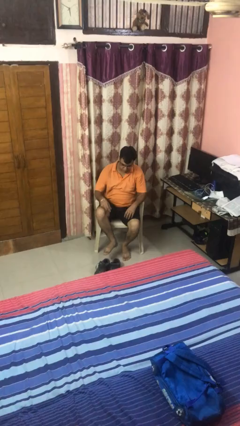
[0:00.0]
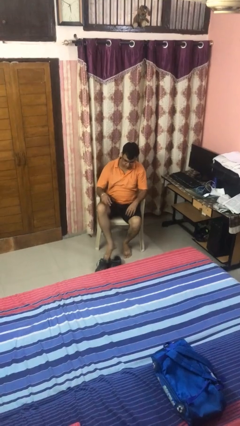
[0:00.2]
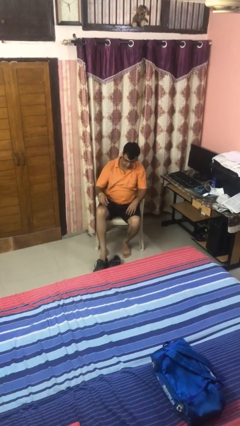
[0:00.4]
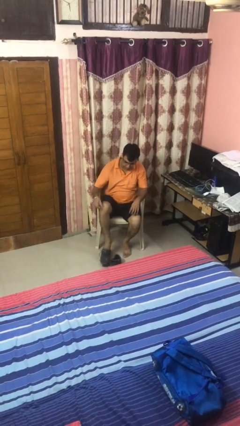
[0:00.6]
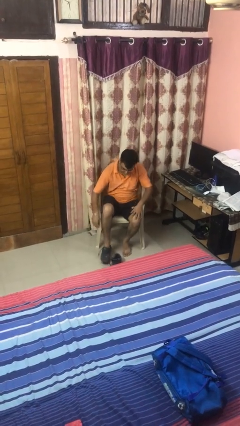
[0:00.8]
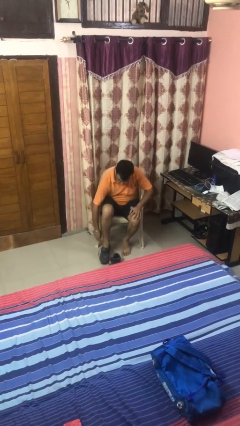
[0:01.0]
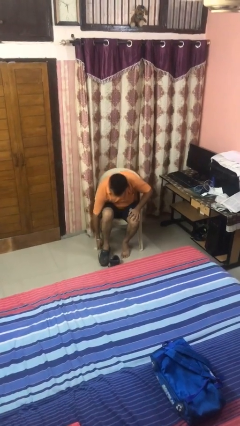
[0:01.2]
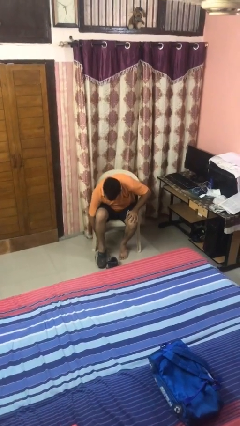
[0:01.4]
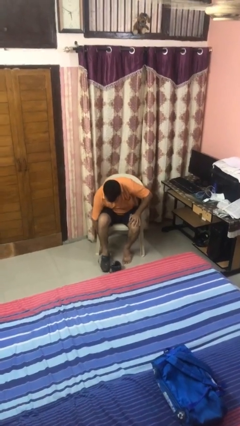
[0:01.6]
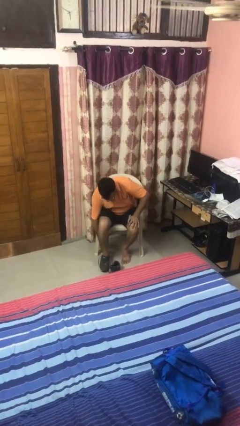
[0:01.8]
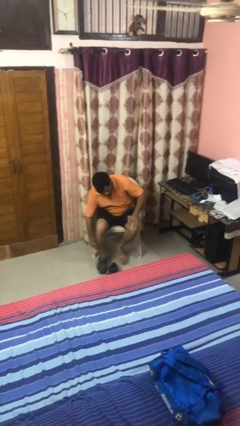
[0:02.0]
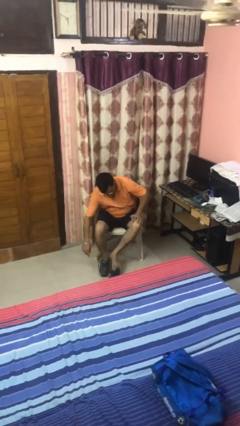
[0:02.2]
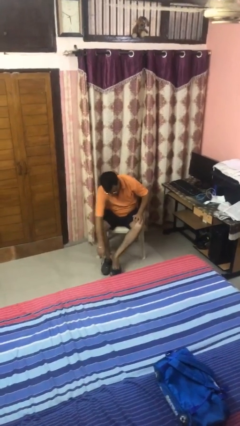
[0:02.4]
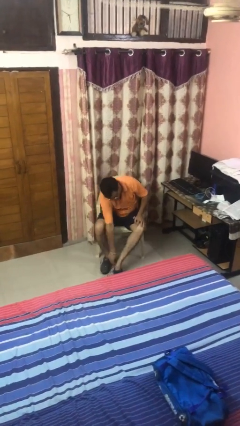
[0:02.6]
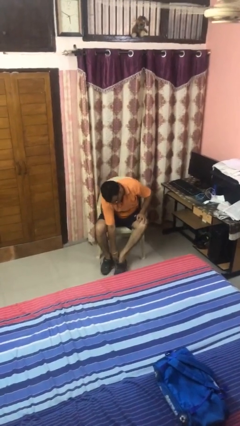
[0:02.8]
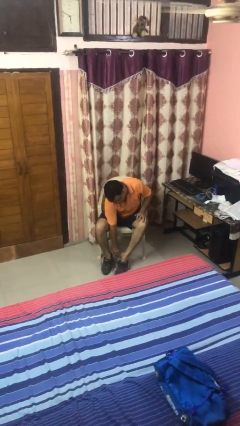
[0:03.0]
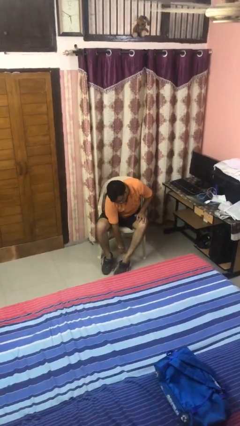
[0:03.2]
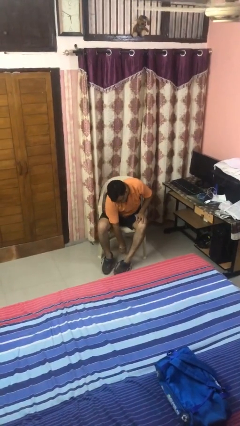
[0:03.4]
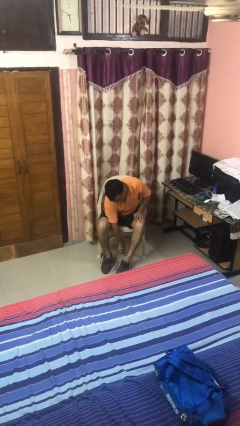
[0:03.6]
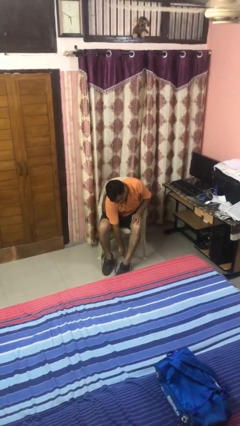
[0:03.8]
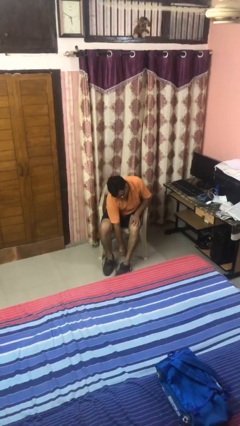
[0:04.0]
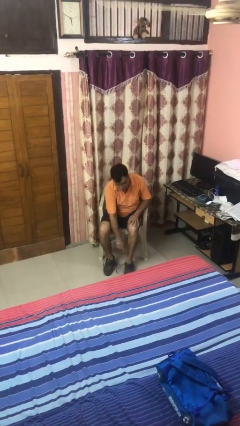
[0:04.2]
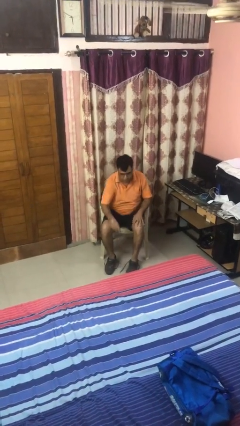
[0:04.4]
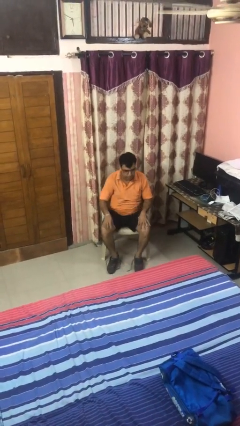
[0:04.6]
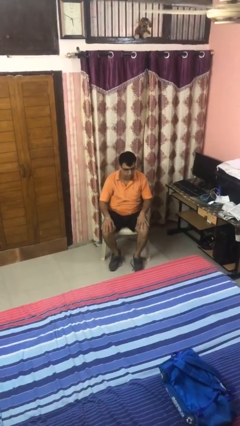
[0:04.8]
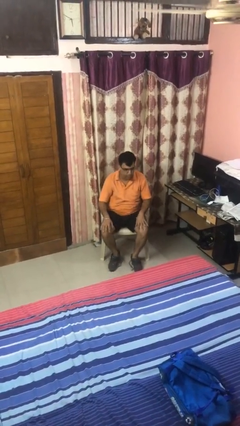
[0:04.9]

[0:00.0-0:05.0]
person puts on boots

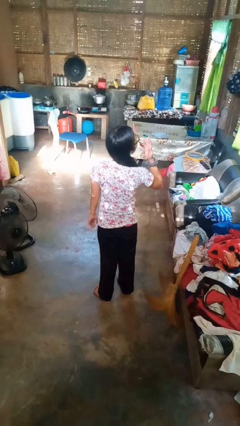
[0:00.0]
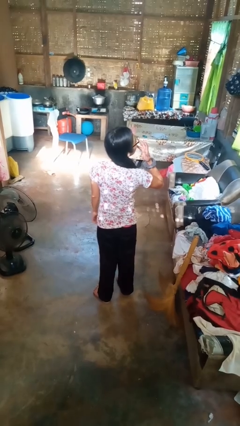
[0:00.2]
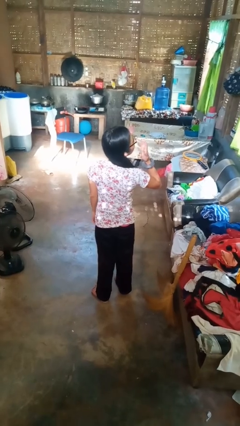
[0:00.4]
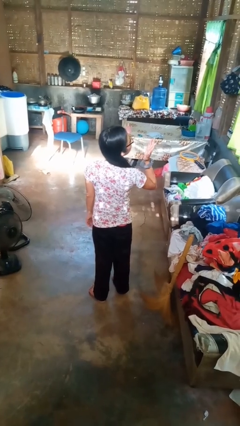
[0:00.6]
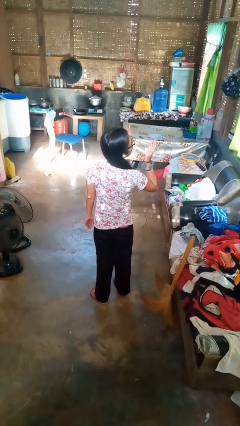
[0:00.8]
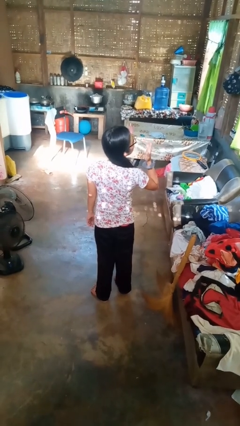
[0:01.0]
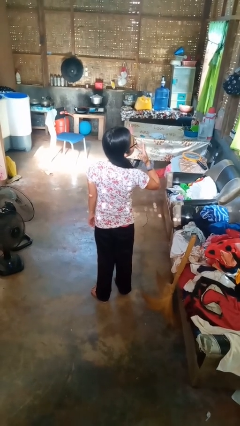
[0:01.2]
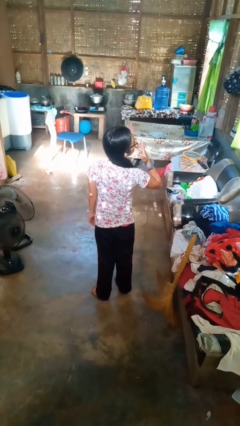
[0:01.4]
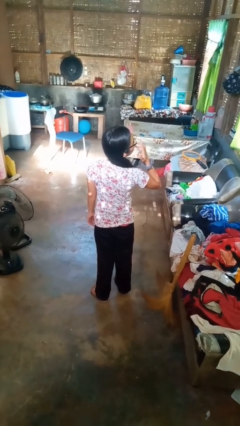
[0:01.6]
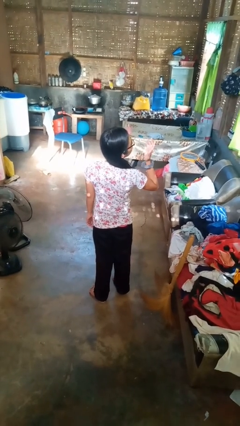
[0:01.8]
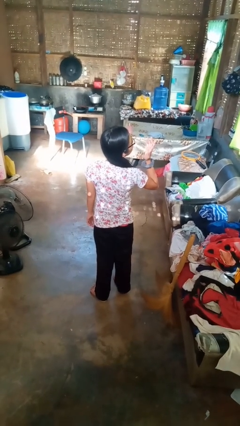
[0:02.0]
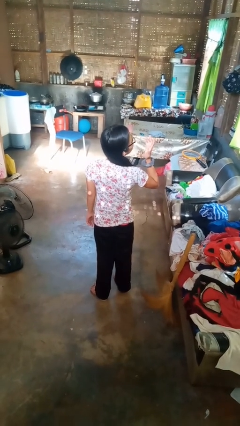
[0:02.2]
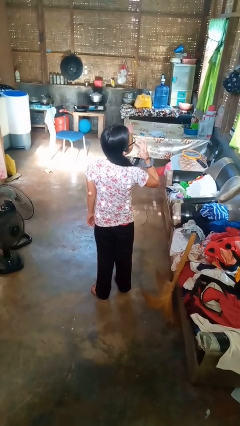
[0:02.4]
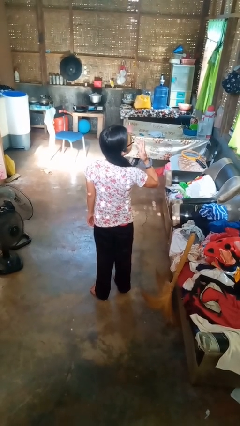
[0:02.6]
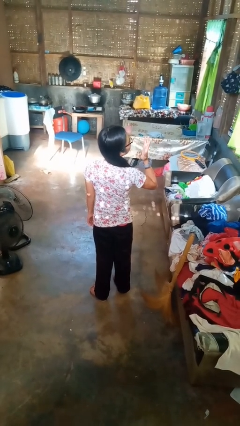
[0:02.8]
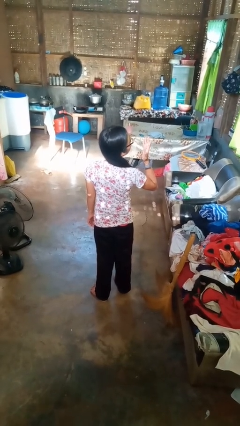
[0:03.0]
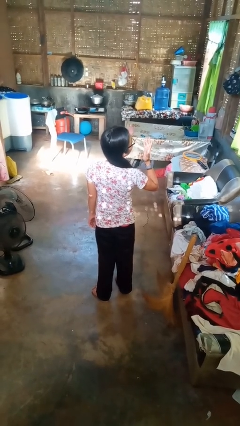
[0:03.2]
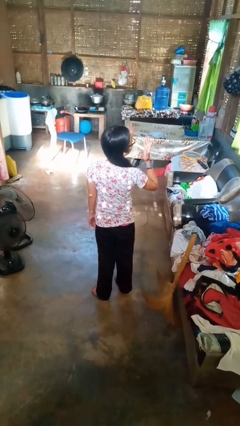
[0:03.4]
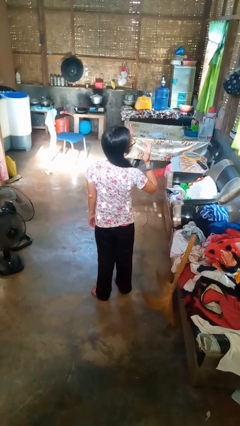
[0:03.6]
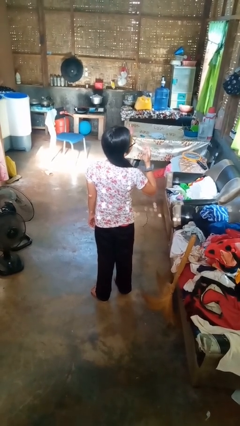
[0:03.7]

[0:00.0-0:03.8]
person licks fingers

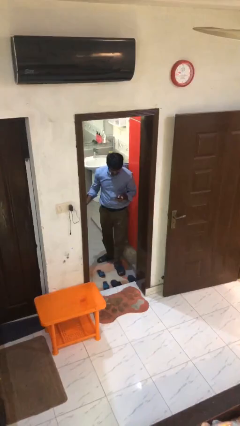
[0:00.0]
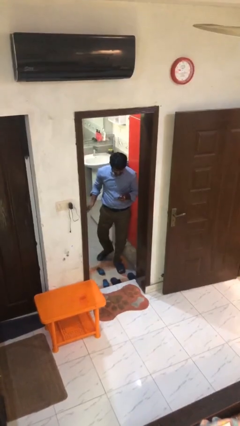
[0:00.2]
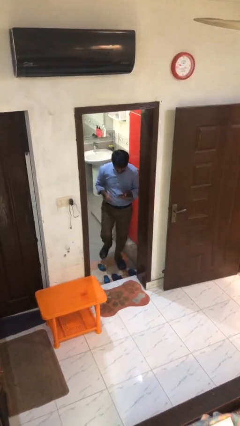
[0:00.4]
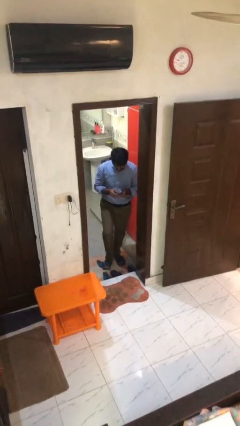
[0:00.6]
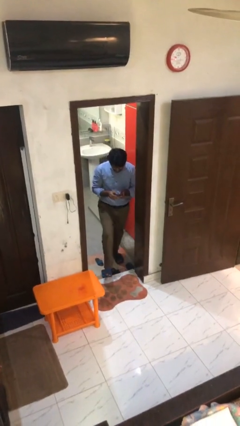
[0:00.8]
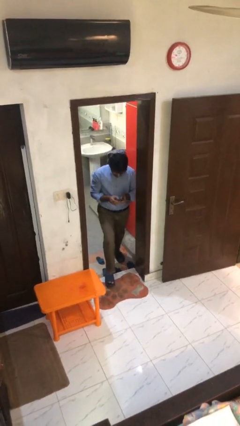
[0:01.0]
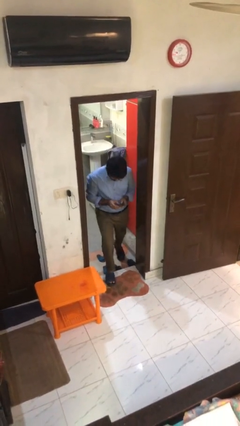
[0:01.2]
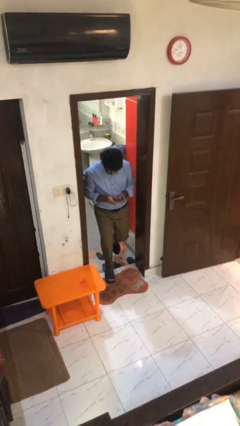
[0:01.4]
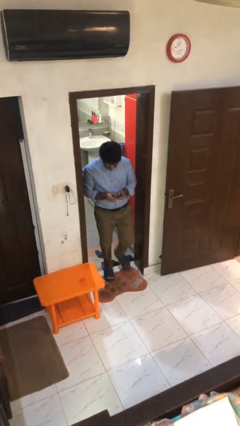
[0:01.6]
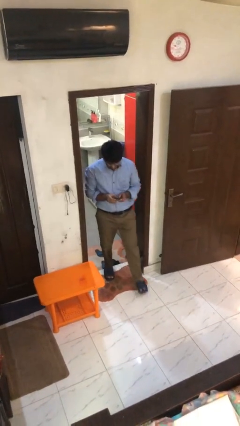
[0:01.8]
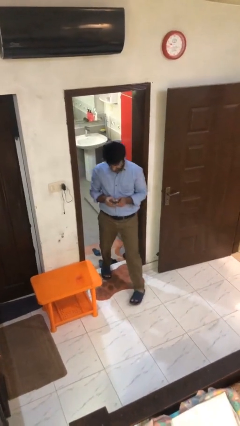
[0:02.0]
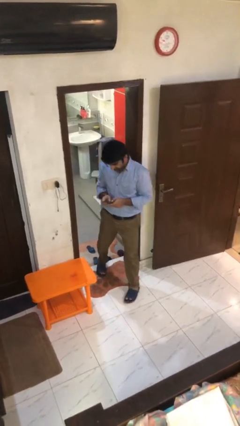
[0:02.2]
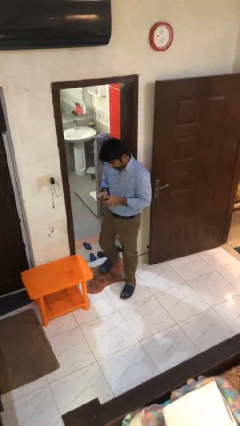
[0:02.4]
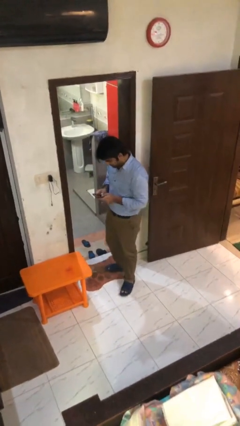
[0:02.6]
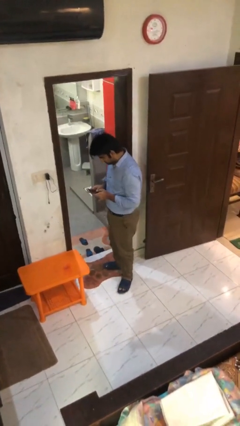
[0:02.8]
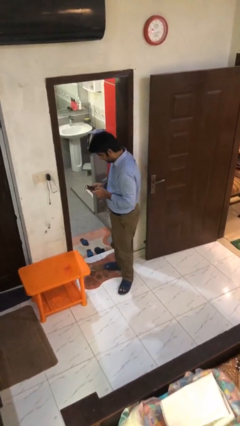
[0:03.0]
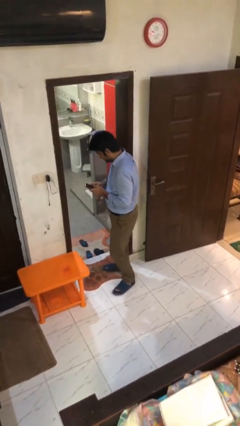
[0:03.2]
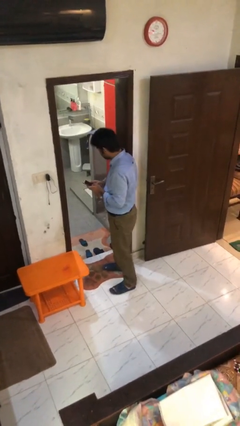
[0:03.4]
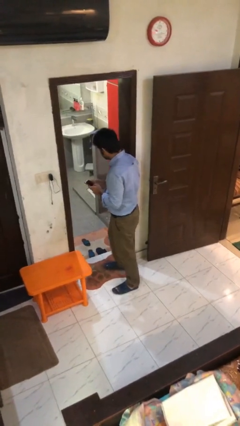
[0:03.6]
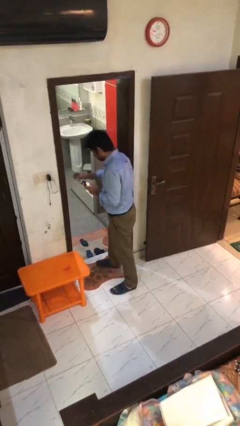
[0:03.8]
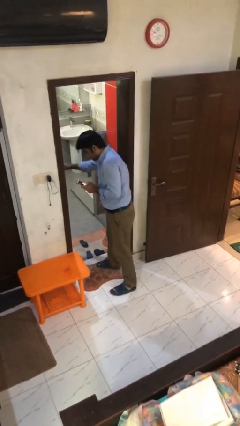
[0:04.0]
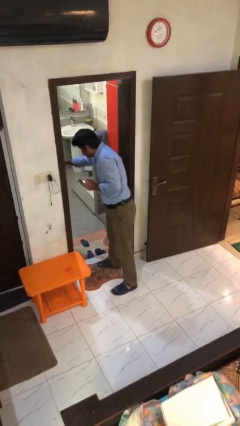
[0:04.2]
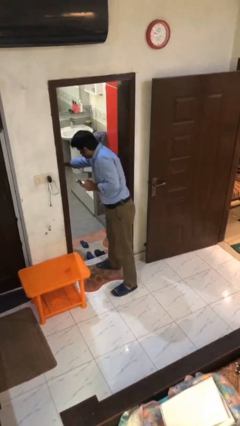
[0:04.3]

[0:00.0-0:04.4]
person enters scene through structure

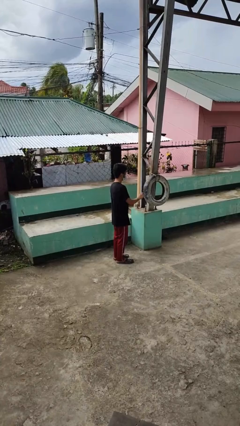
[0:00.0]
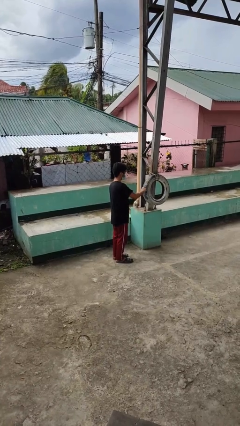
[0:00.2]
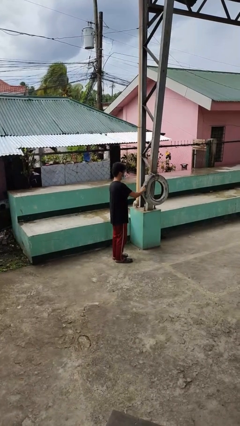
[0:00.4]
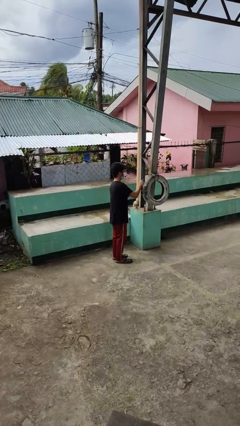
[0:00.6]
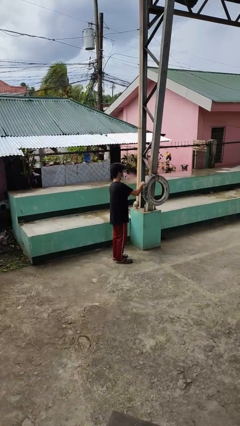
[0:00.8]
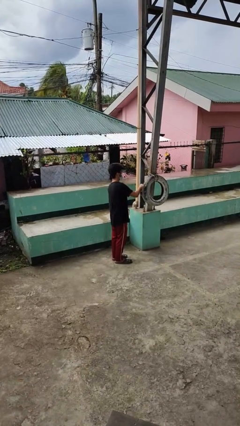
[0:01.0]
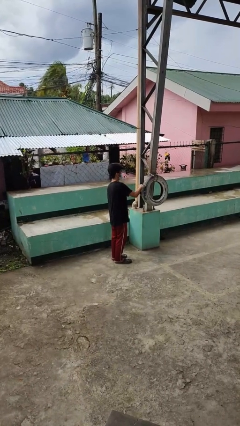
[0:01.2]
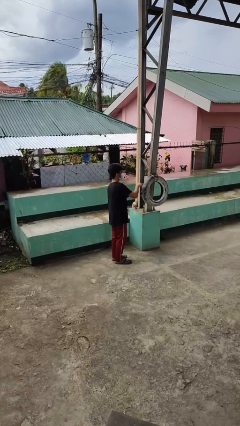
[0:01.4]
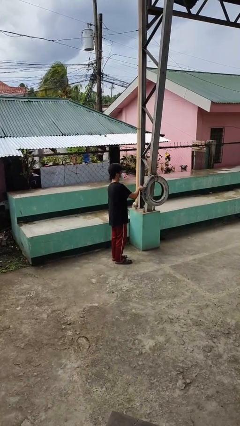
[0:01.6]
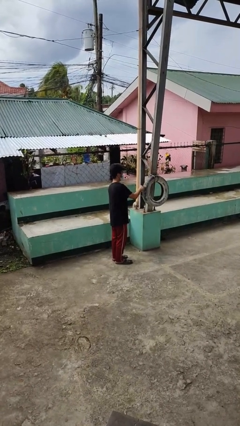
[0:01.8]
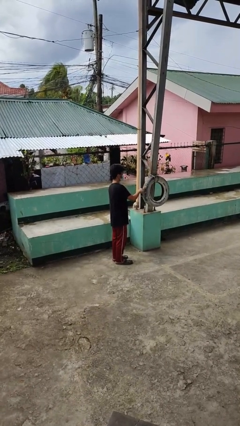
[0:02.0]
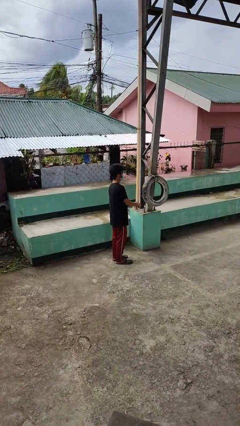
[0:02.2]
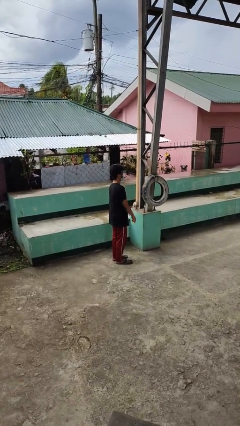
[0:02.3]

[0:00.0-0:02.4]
person taps object with finger

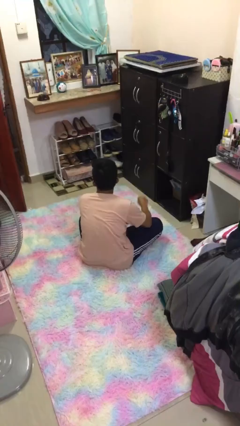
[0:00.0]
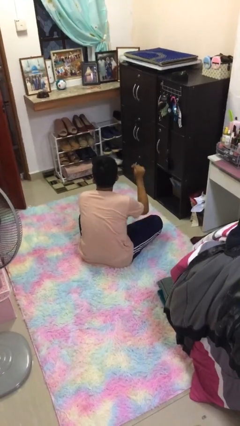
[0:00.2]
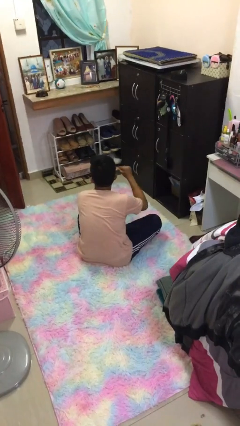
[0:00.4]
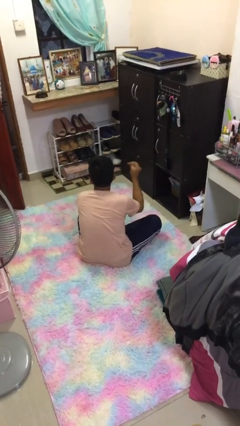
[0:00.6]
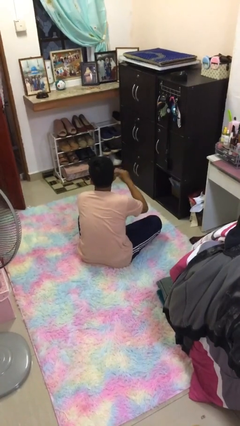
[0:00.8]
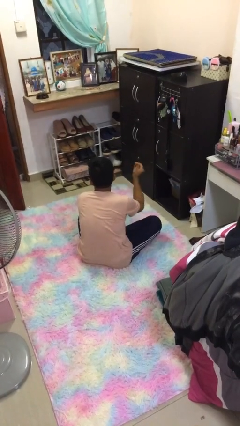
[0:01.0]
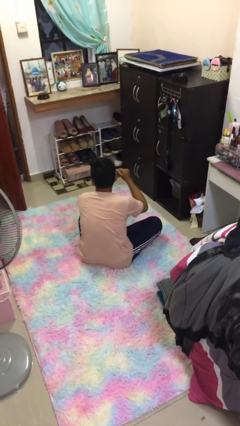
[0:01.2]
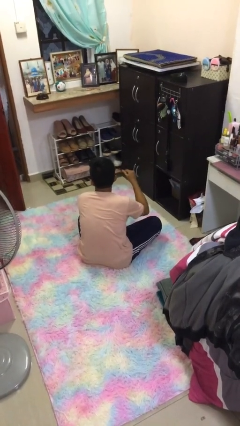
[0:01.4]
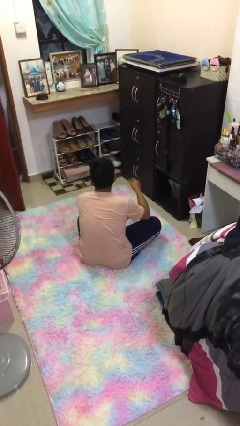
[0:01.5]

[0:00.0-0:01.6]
person snaps fingers

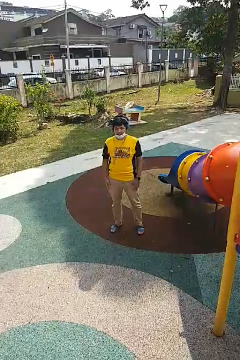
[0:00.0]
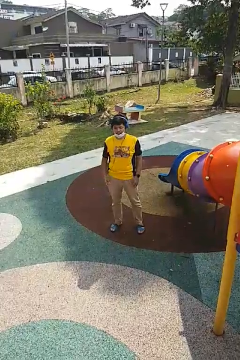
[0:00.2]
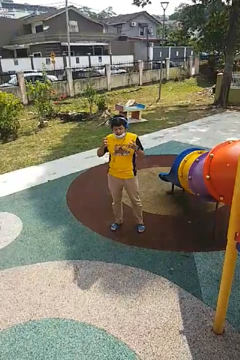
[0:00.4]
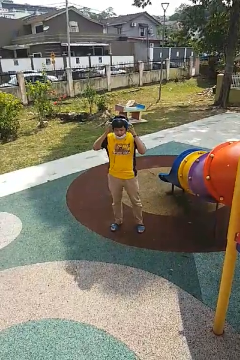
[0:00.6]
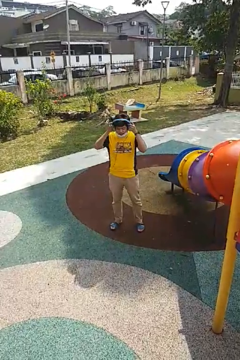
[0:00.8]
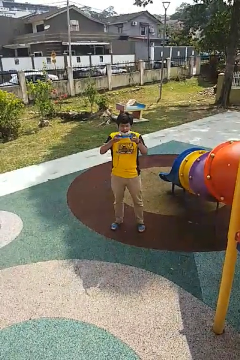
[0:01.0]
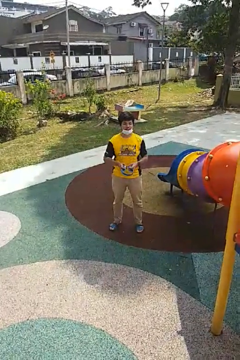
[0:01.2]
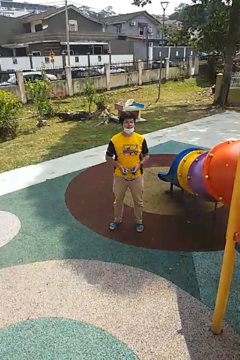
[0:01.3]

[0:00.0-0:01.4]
person takes off headphones
